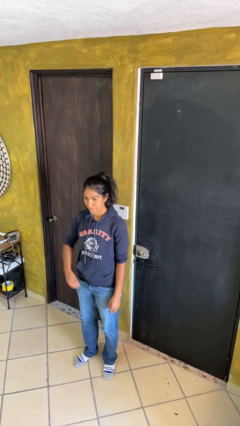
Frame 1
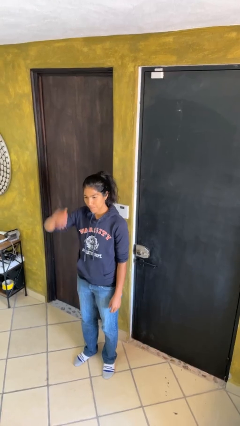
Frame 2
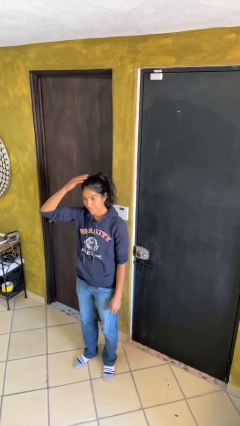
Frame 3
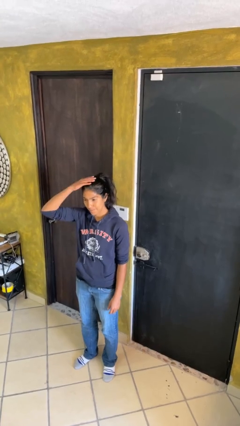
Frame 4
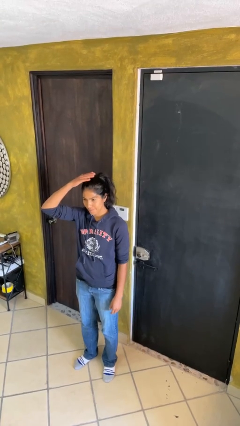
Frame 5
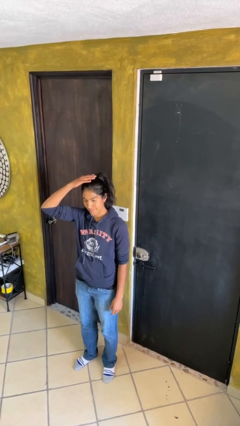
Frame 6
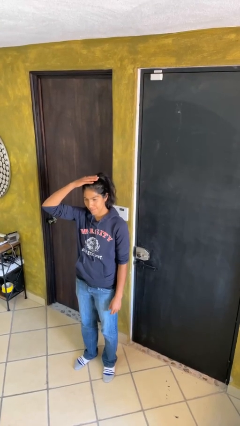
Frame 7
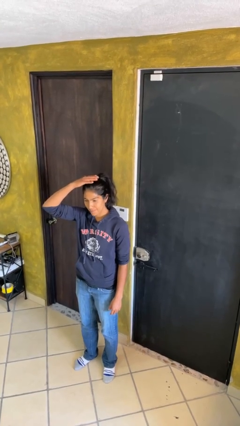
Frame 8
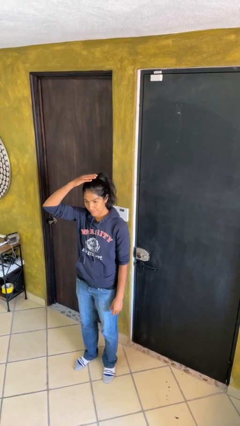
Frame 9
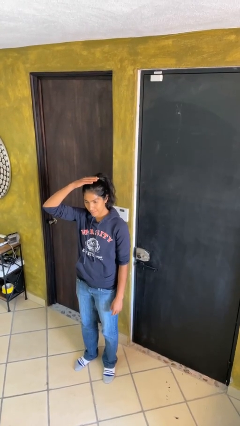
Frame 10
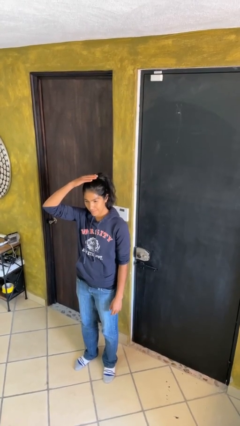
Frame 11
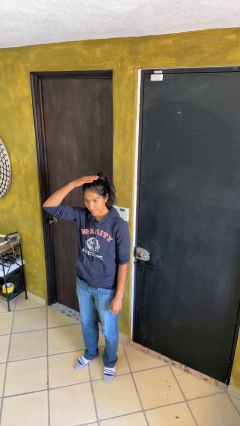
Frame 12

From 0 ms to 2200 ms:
person pats head

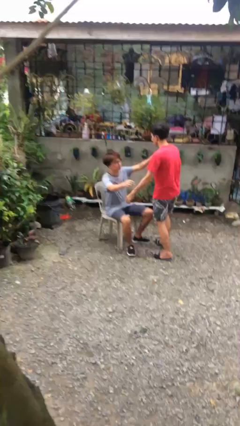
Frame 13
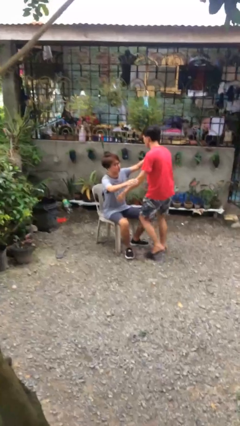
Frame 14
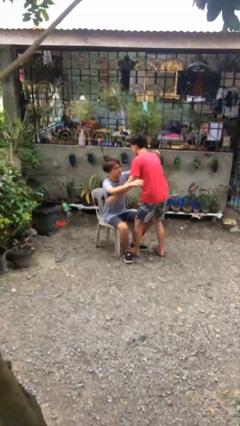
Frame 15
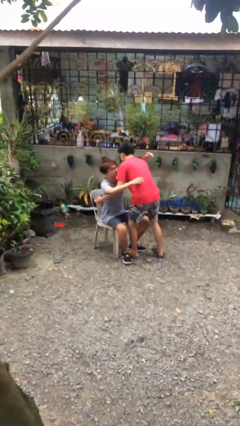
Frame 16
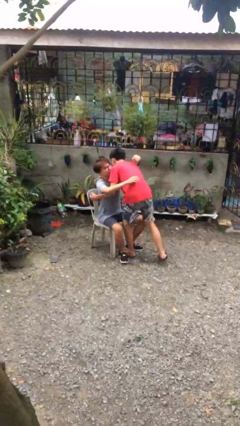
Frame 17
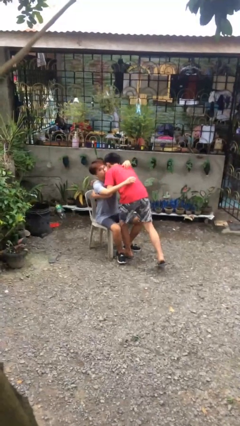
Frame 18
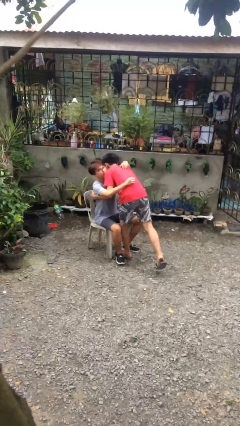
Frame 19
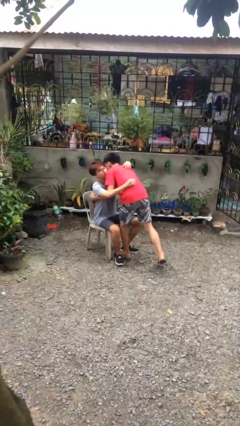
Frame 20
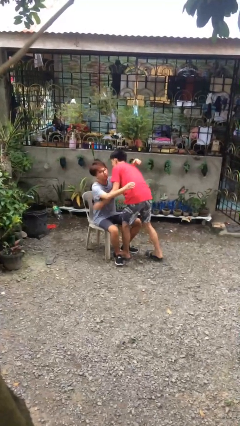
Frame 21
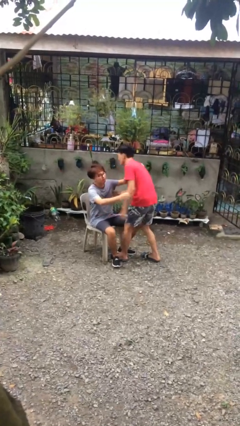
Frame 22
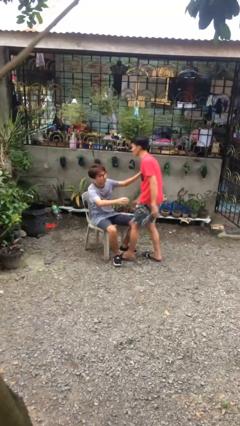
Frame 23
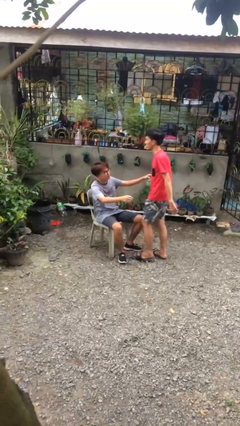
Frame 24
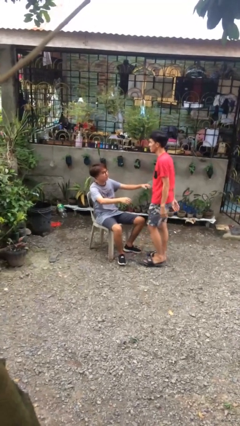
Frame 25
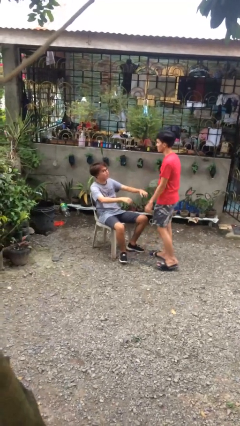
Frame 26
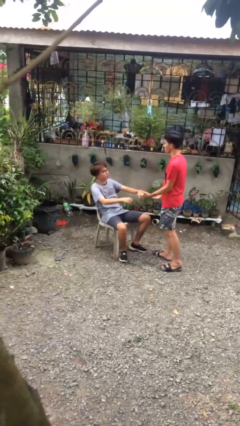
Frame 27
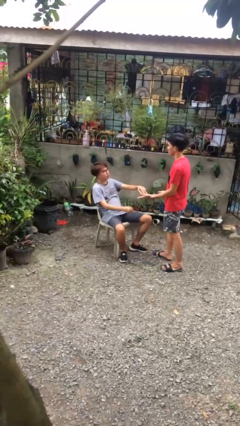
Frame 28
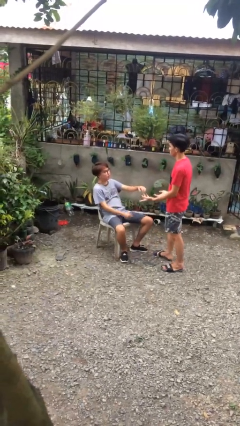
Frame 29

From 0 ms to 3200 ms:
person embraces person

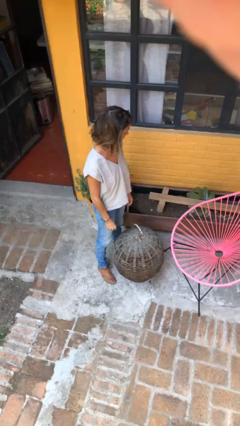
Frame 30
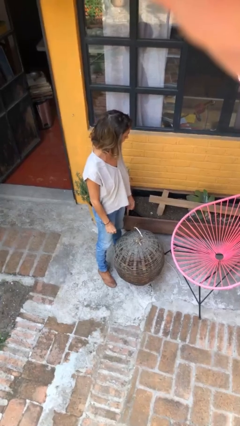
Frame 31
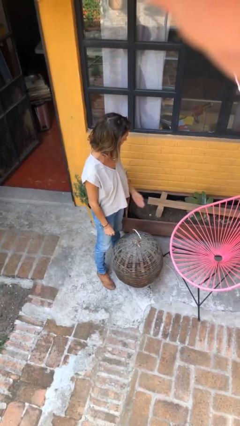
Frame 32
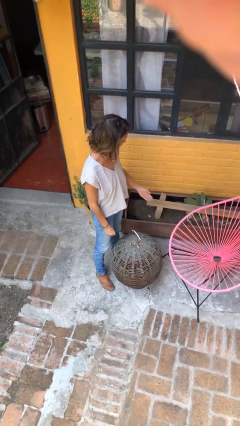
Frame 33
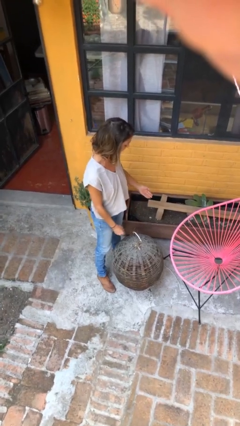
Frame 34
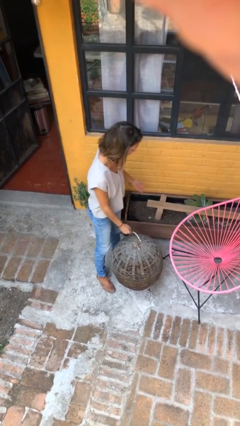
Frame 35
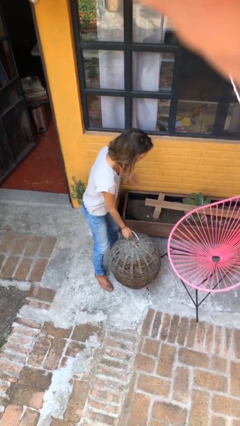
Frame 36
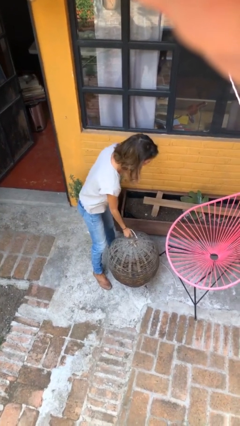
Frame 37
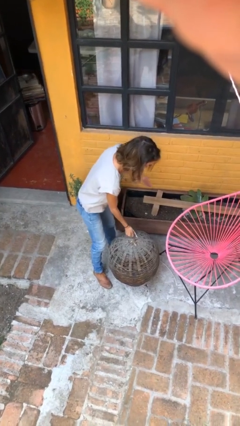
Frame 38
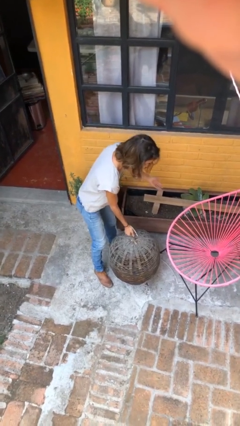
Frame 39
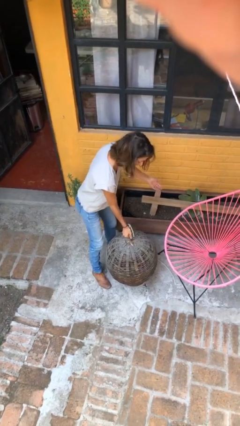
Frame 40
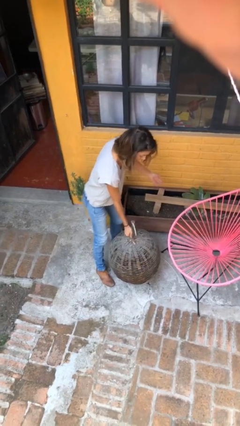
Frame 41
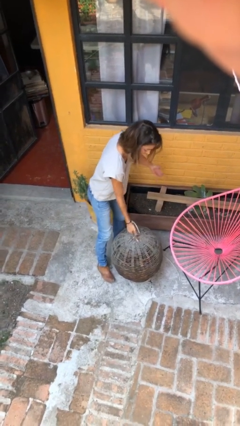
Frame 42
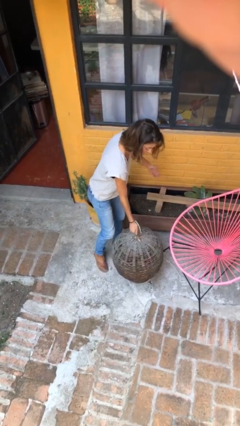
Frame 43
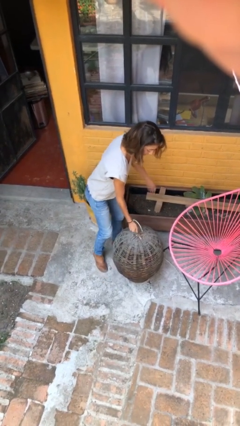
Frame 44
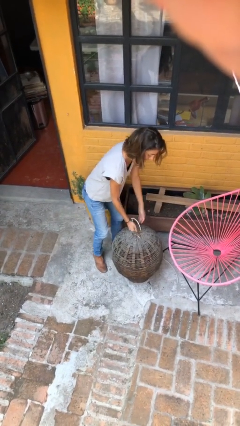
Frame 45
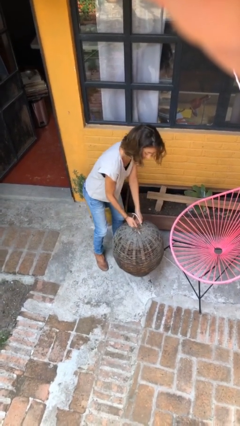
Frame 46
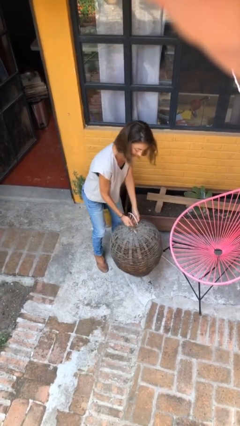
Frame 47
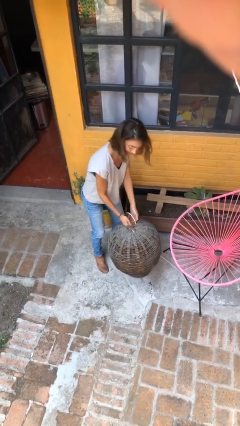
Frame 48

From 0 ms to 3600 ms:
person picks up object from floor

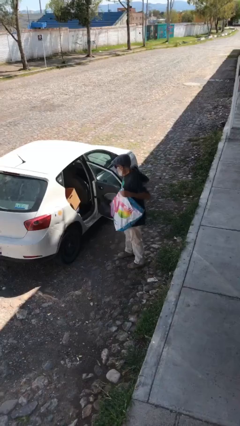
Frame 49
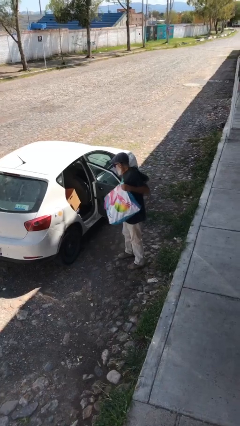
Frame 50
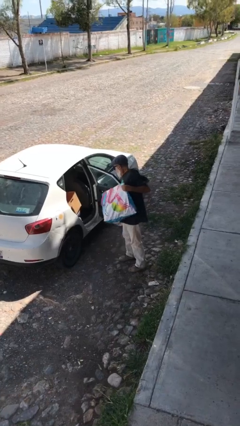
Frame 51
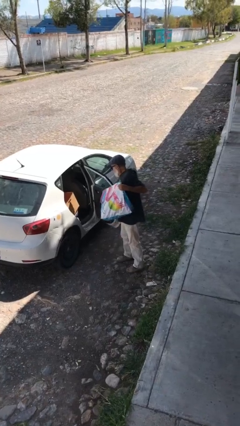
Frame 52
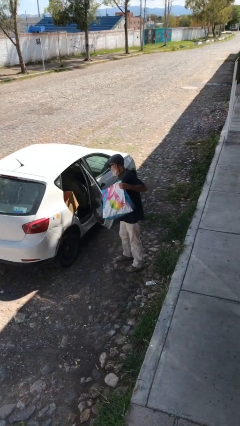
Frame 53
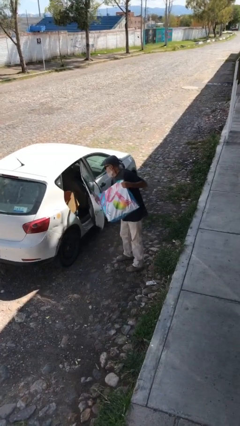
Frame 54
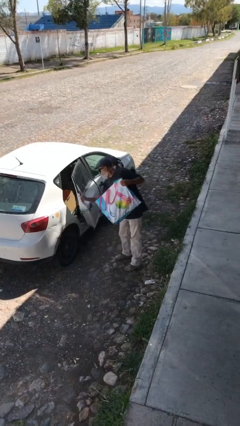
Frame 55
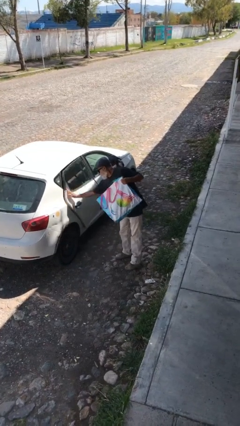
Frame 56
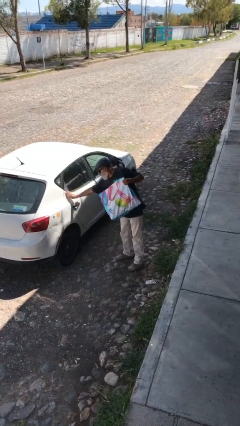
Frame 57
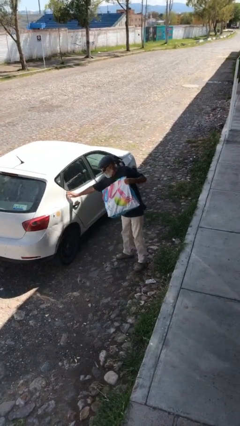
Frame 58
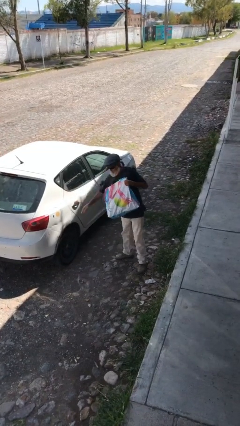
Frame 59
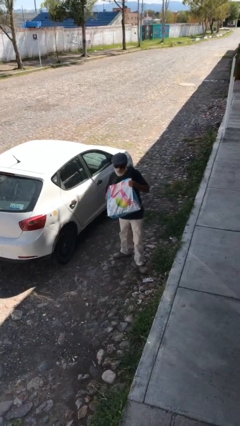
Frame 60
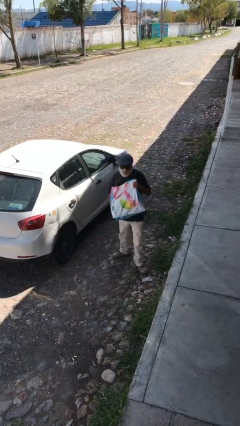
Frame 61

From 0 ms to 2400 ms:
person closes car door

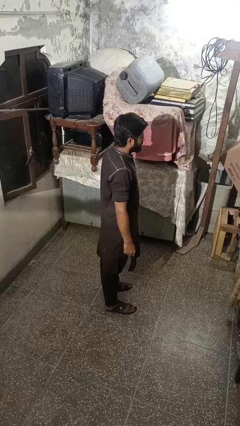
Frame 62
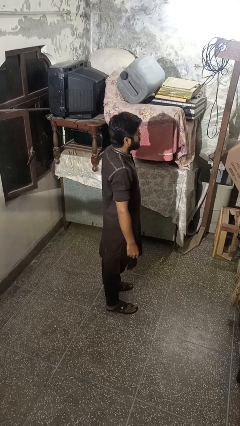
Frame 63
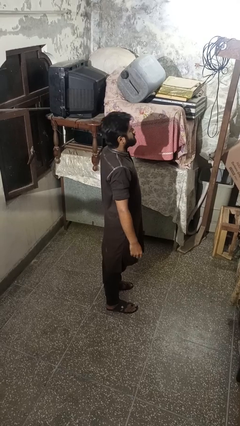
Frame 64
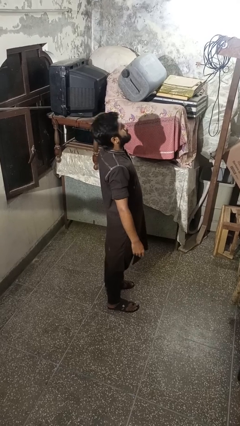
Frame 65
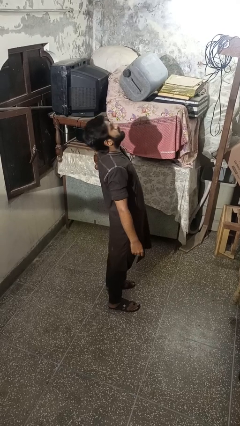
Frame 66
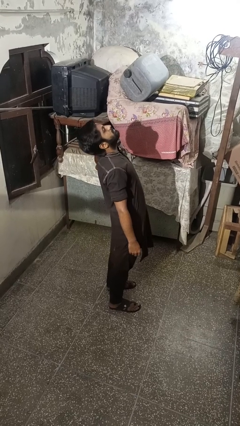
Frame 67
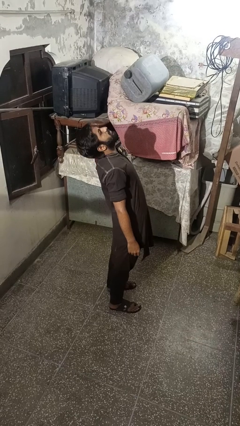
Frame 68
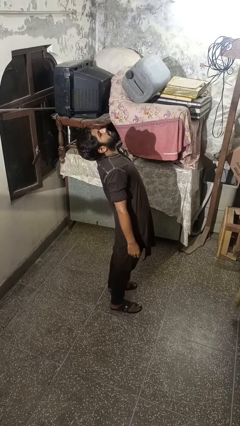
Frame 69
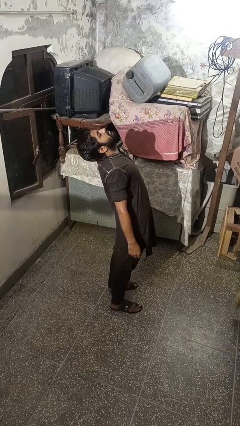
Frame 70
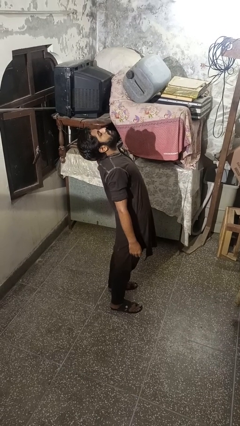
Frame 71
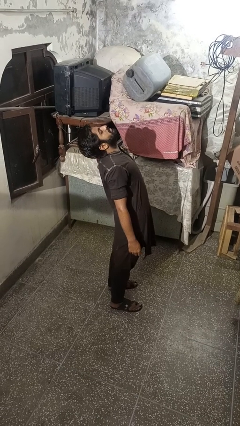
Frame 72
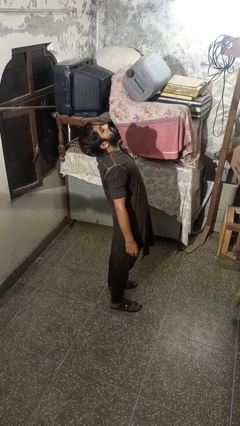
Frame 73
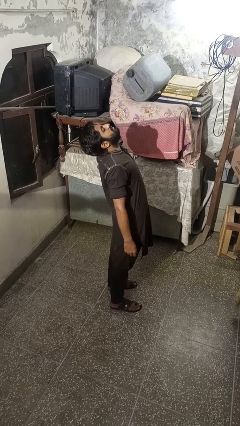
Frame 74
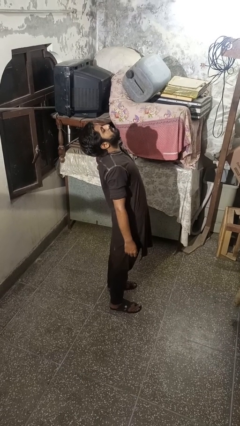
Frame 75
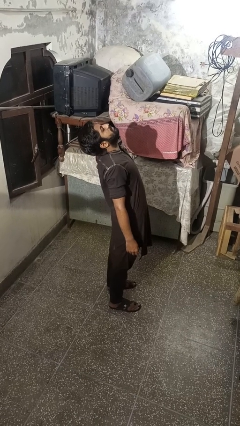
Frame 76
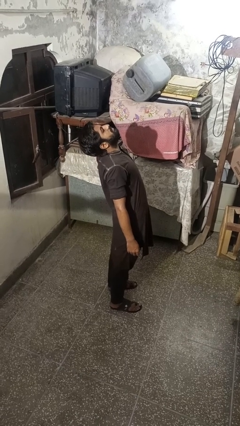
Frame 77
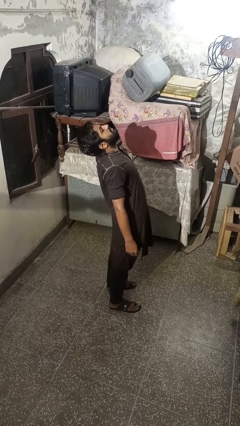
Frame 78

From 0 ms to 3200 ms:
person stretches back

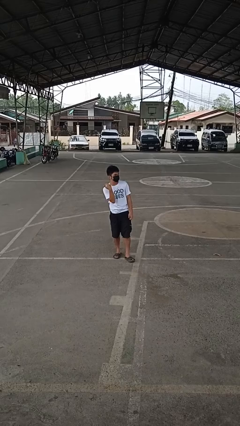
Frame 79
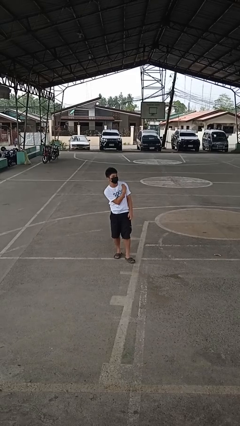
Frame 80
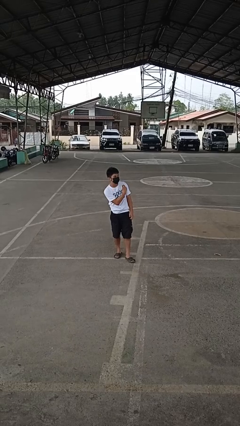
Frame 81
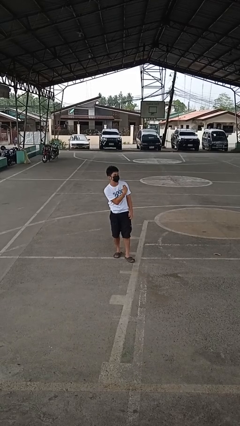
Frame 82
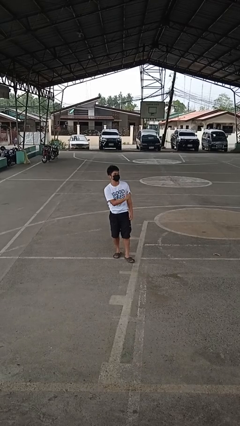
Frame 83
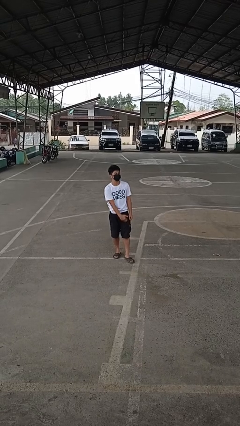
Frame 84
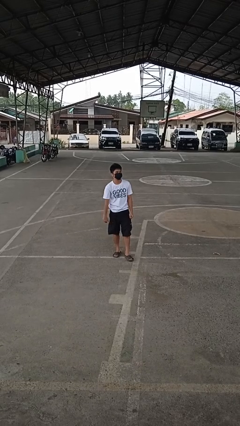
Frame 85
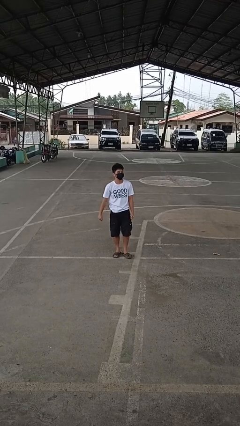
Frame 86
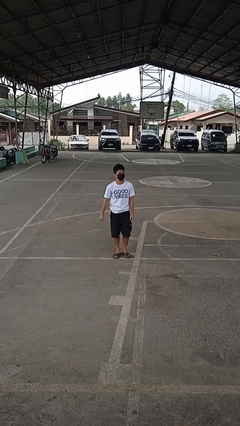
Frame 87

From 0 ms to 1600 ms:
person gestures cut

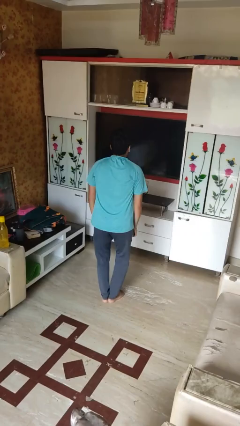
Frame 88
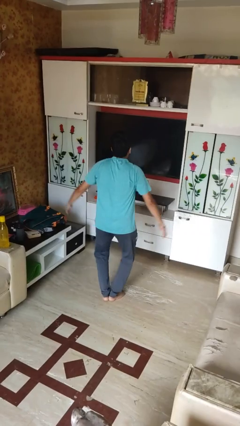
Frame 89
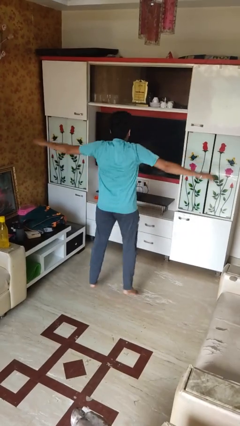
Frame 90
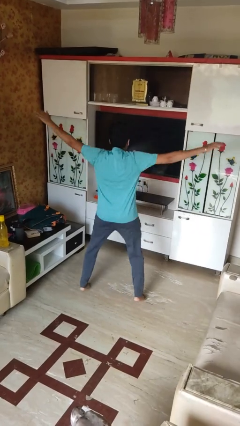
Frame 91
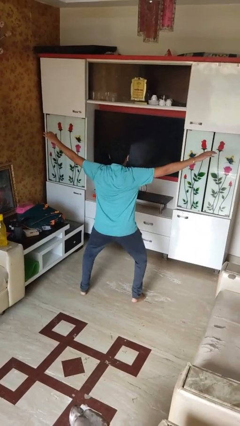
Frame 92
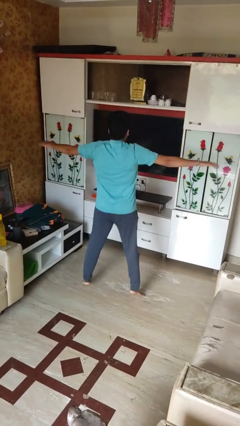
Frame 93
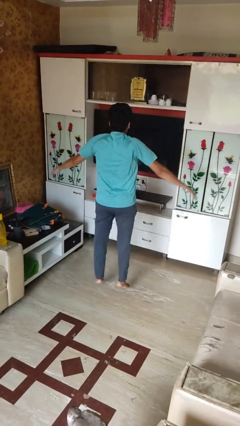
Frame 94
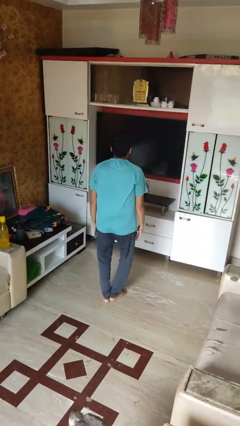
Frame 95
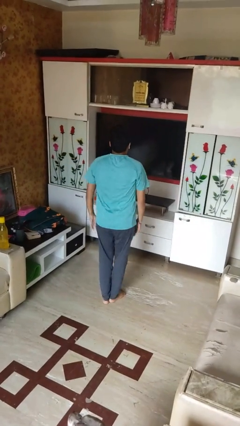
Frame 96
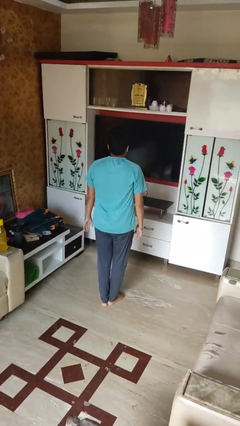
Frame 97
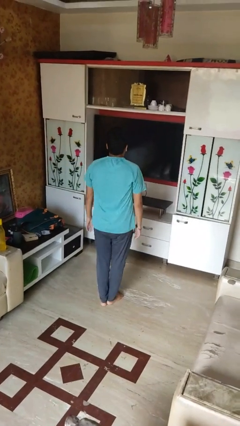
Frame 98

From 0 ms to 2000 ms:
person exercises with jumping jacks
